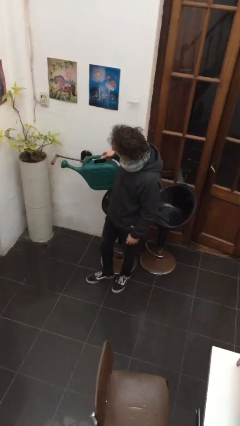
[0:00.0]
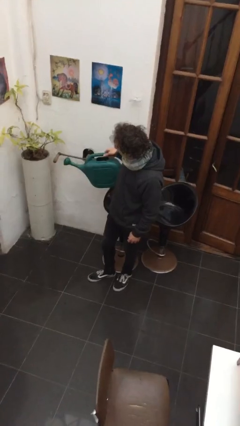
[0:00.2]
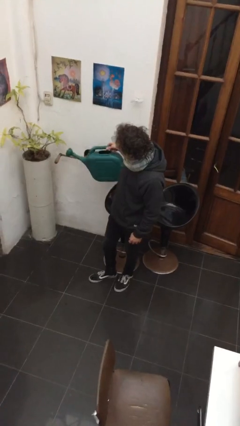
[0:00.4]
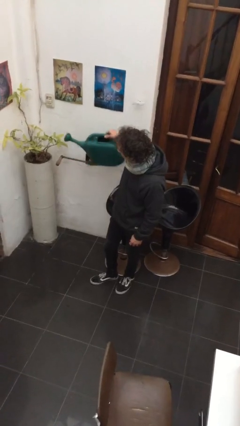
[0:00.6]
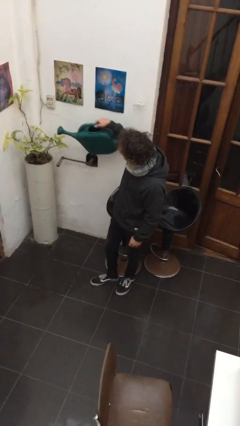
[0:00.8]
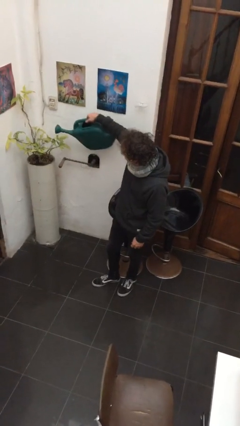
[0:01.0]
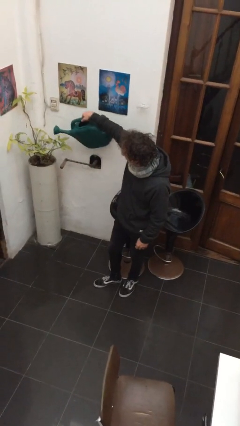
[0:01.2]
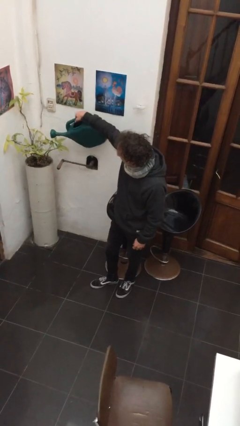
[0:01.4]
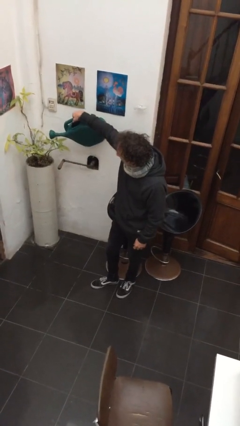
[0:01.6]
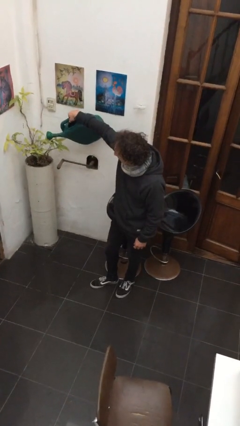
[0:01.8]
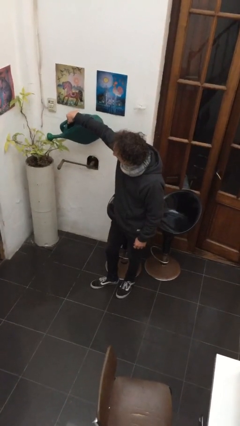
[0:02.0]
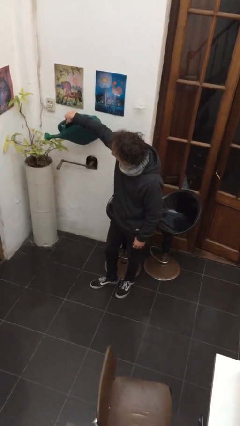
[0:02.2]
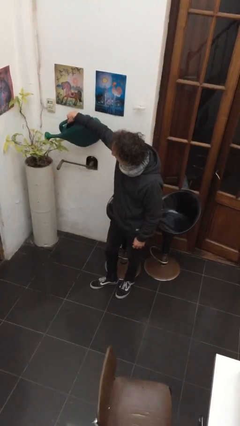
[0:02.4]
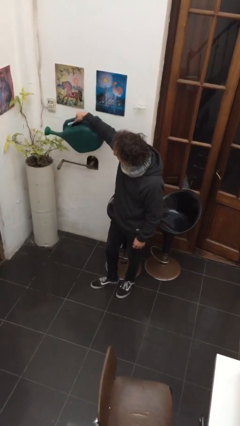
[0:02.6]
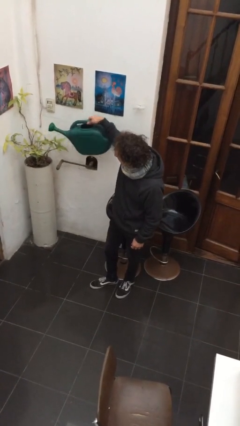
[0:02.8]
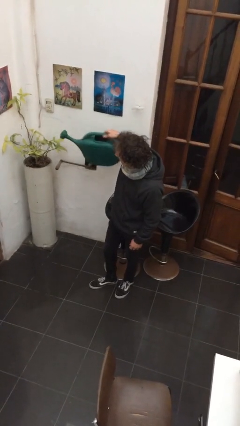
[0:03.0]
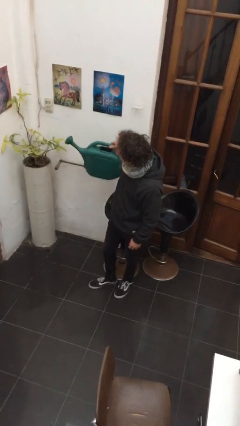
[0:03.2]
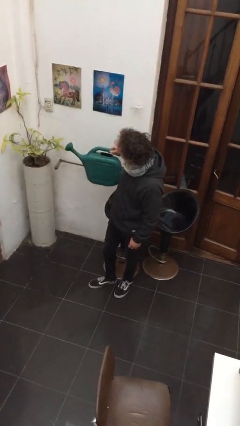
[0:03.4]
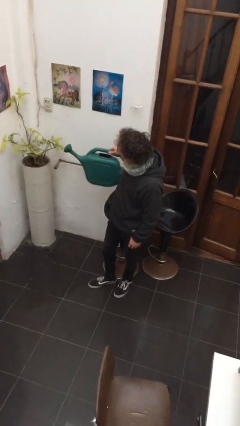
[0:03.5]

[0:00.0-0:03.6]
person waters houseplant

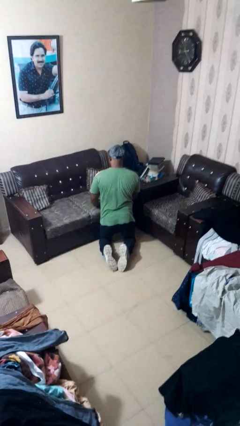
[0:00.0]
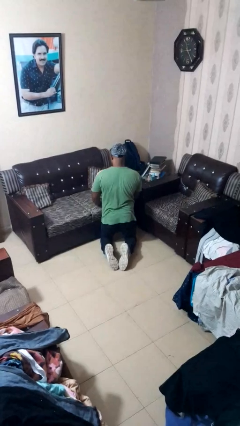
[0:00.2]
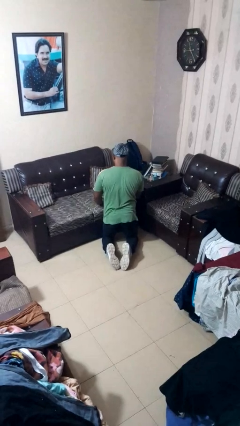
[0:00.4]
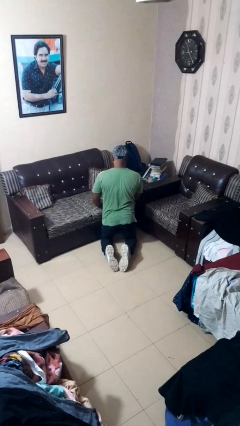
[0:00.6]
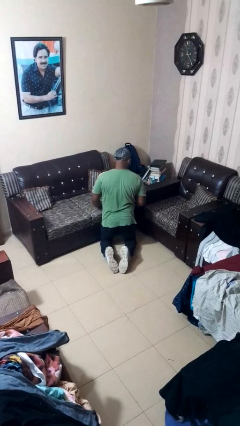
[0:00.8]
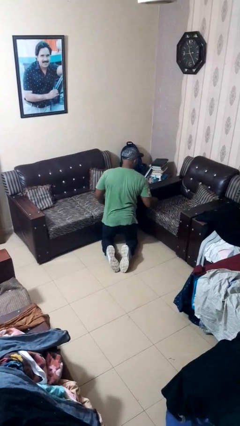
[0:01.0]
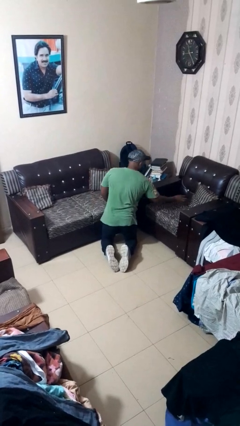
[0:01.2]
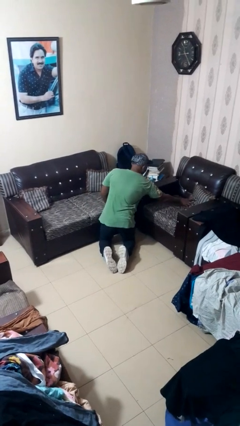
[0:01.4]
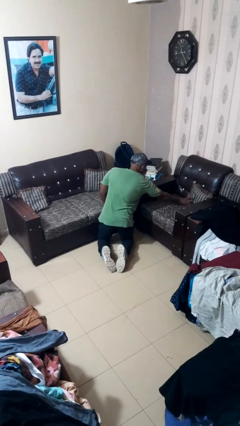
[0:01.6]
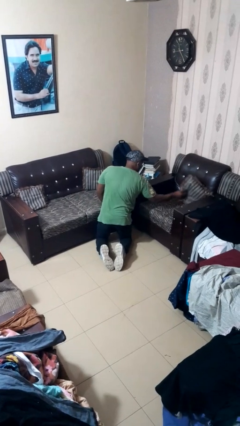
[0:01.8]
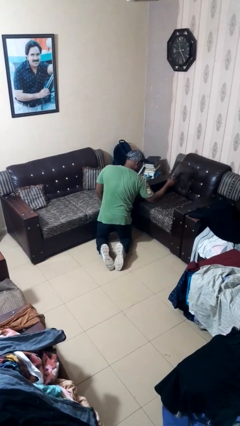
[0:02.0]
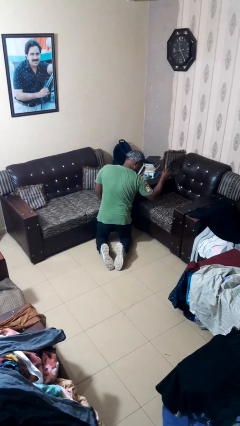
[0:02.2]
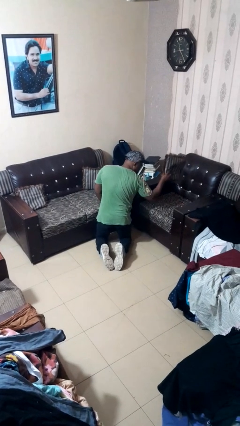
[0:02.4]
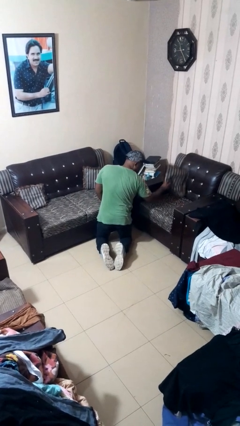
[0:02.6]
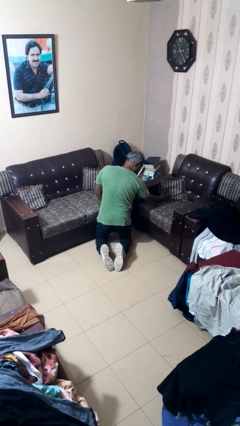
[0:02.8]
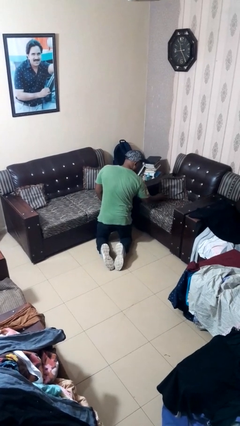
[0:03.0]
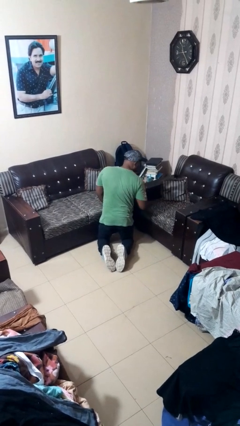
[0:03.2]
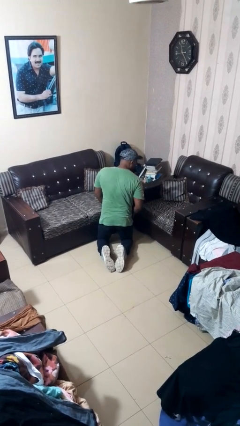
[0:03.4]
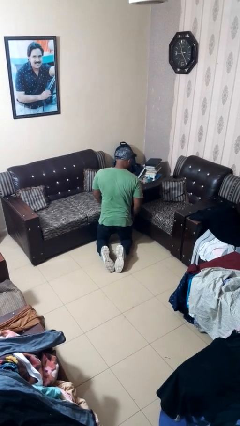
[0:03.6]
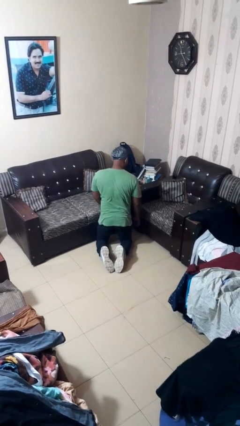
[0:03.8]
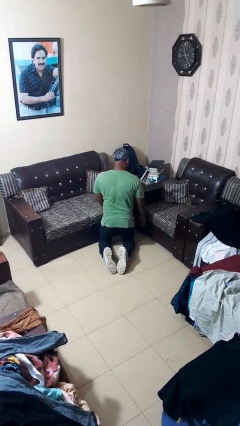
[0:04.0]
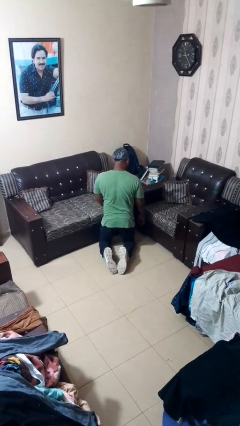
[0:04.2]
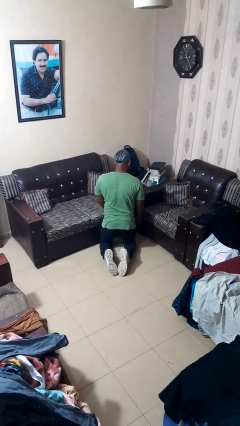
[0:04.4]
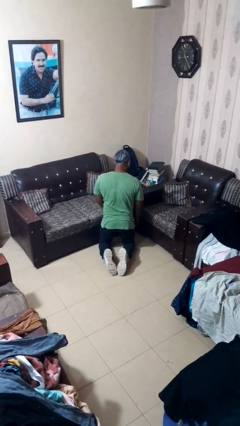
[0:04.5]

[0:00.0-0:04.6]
person searches in couch

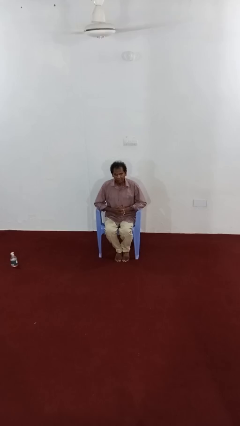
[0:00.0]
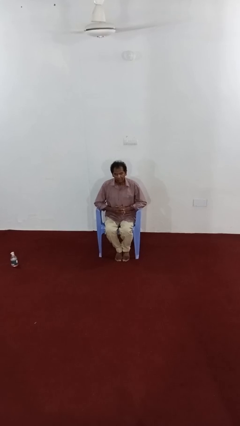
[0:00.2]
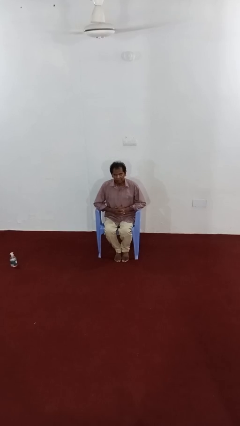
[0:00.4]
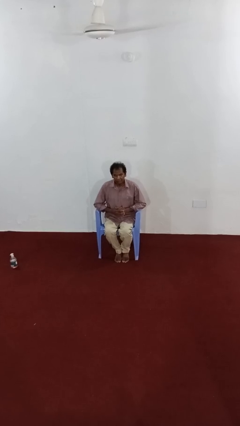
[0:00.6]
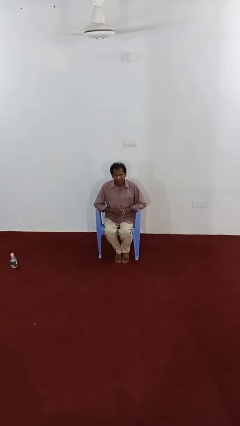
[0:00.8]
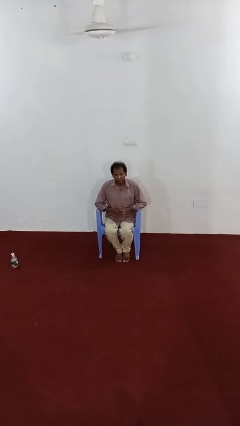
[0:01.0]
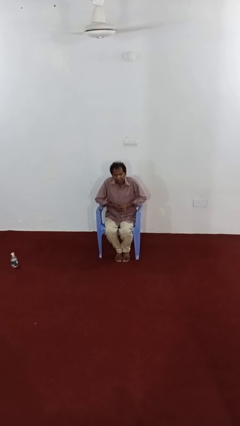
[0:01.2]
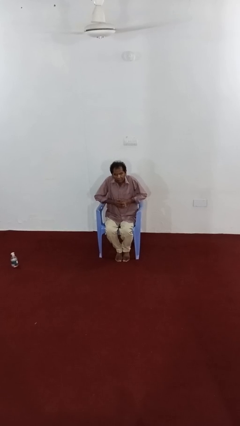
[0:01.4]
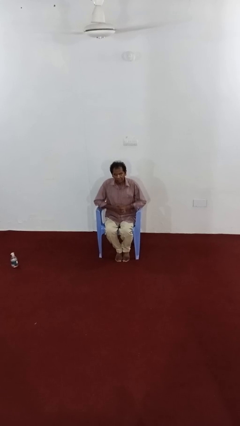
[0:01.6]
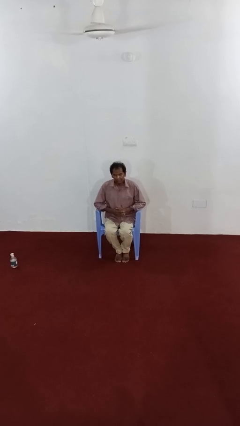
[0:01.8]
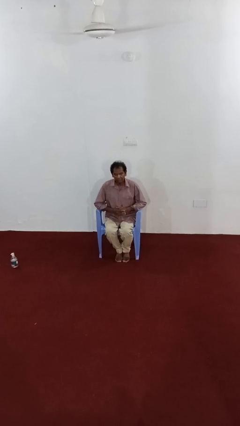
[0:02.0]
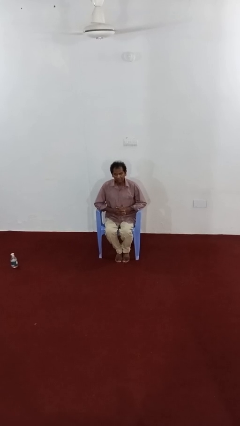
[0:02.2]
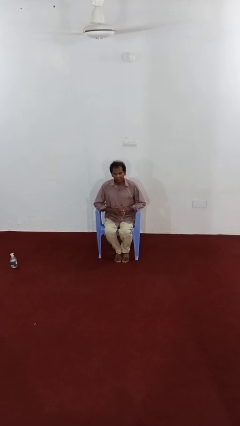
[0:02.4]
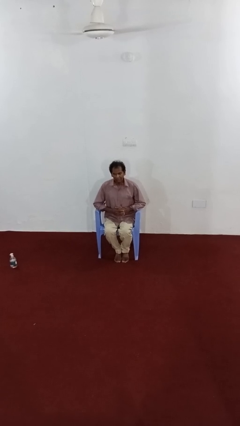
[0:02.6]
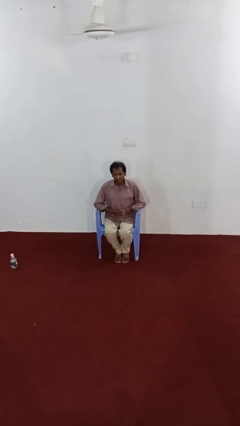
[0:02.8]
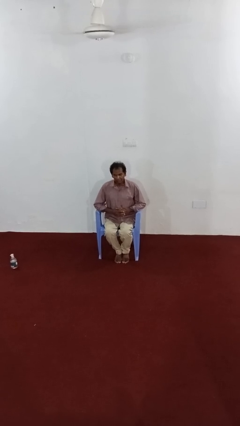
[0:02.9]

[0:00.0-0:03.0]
person shrugs

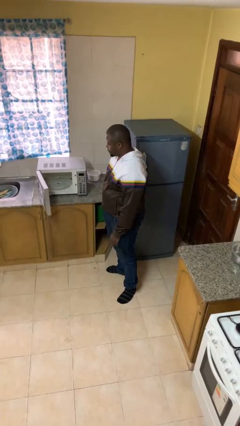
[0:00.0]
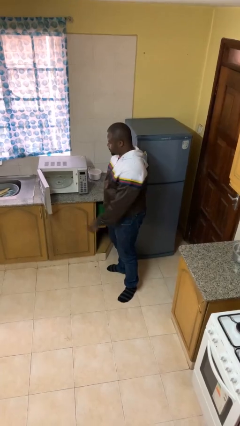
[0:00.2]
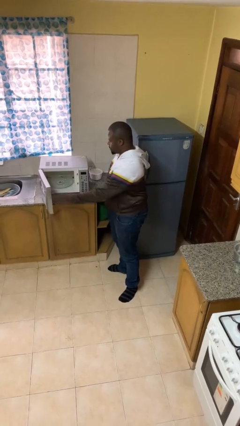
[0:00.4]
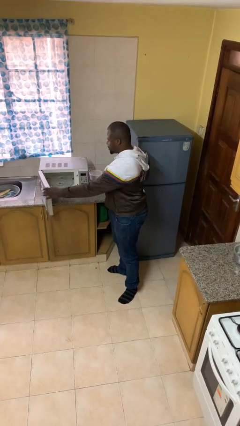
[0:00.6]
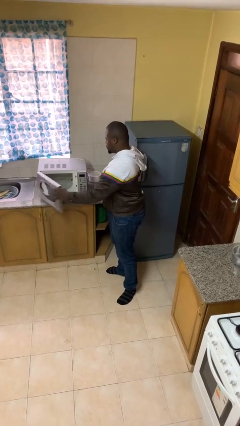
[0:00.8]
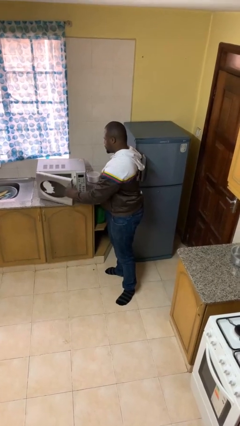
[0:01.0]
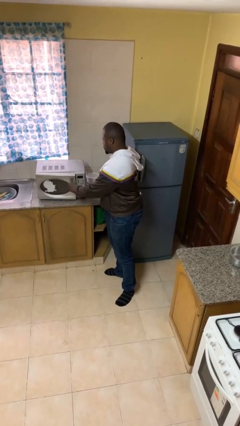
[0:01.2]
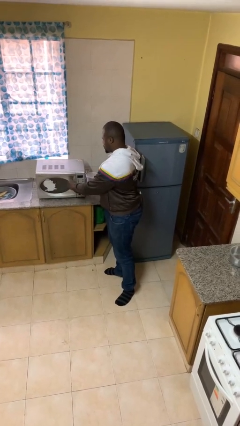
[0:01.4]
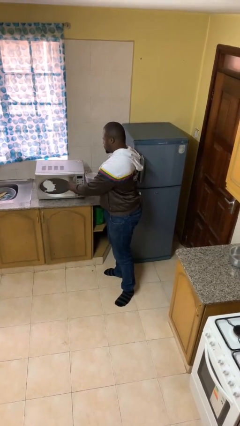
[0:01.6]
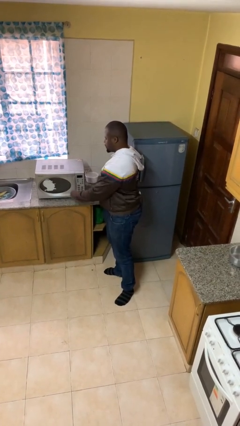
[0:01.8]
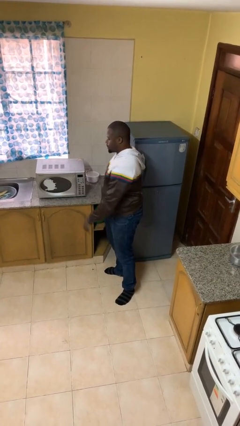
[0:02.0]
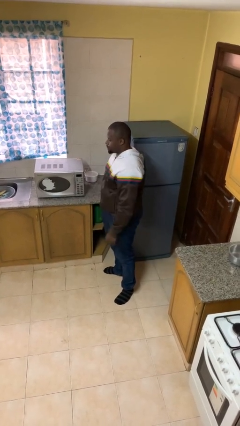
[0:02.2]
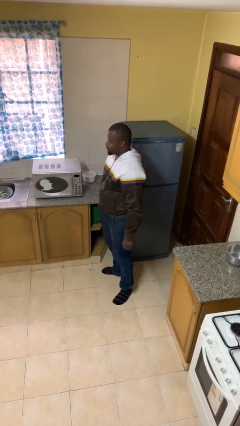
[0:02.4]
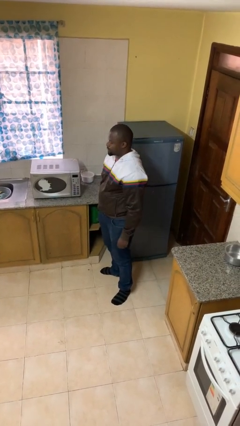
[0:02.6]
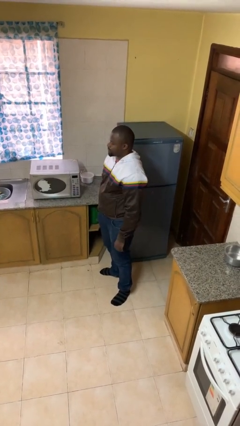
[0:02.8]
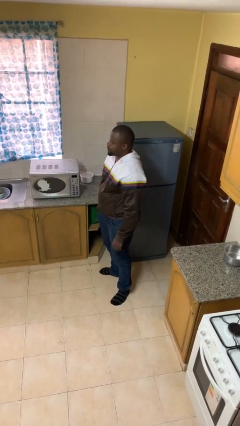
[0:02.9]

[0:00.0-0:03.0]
person closes microwave

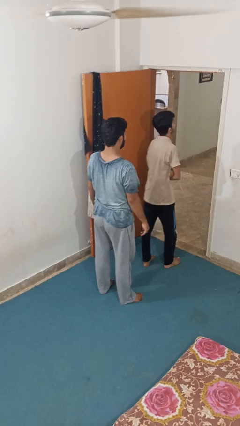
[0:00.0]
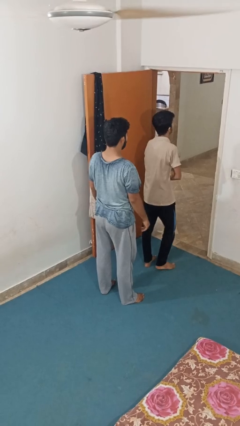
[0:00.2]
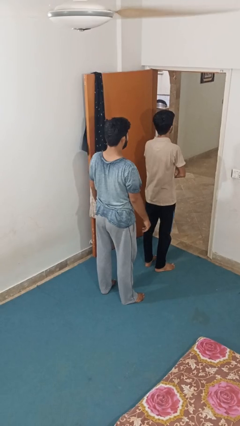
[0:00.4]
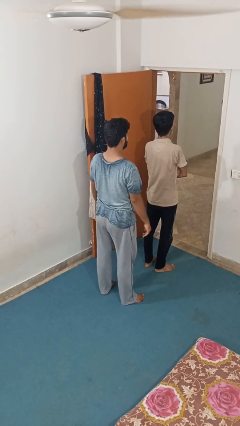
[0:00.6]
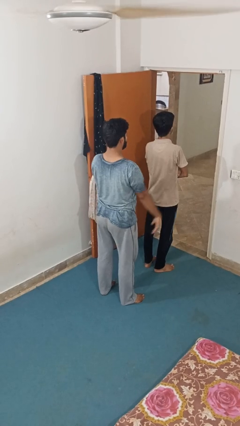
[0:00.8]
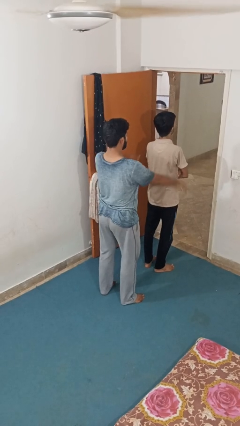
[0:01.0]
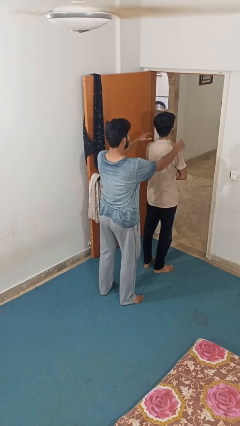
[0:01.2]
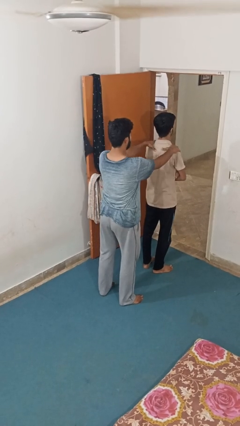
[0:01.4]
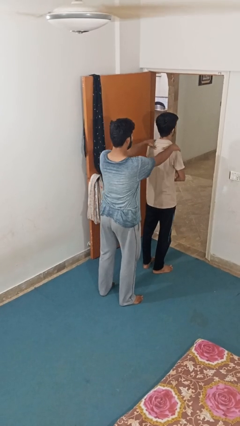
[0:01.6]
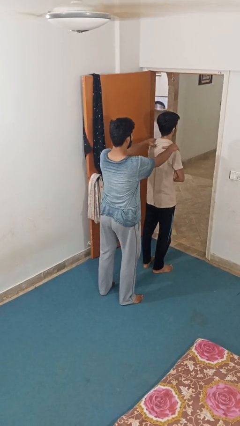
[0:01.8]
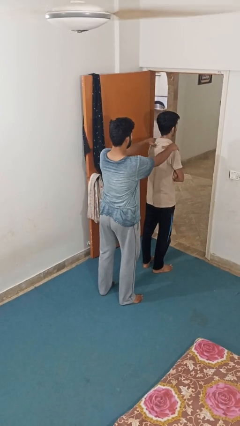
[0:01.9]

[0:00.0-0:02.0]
person grabs person by shoulder

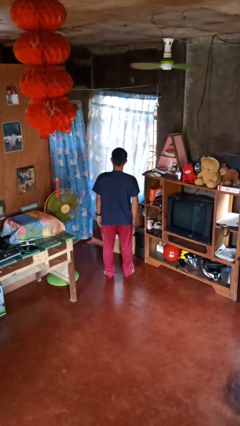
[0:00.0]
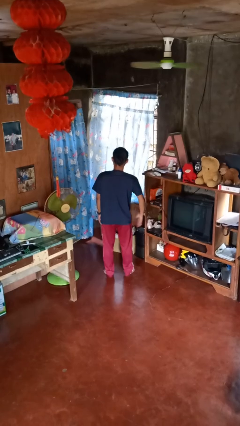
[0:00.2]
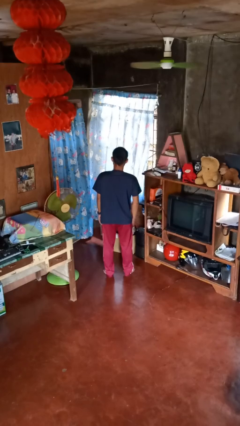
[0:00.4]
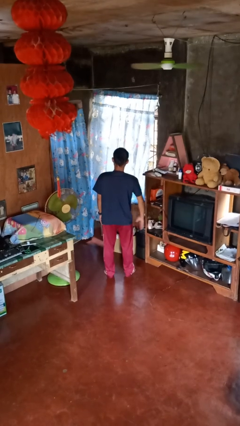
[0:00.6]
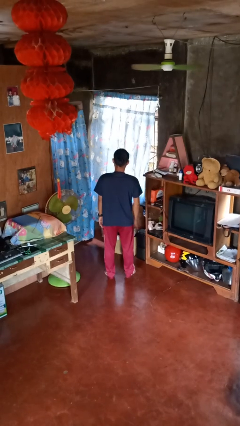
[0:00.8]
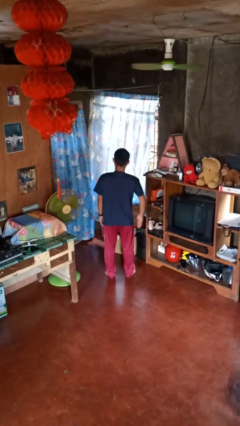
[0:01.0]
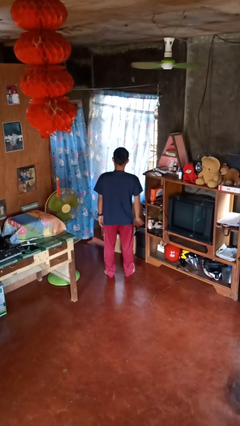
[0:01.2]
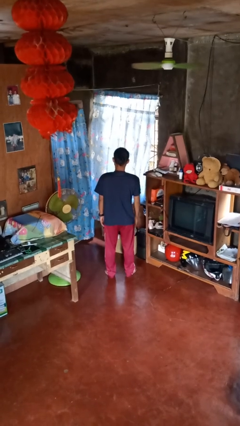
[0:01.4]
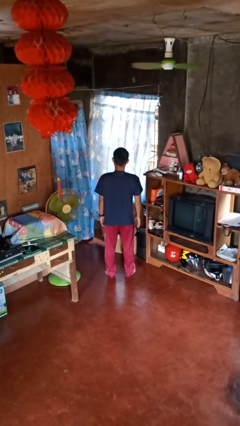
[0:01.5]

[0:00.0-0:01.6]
person slaps hands on thighs
